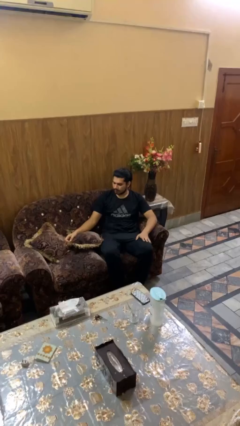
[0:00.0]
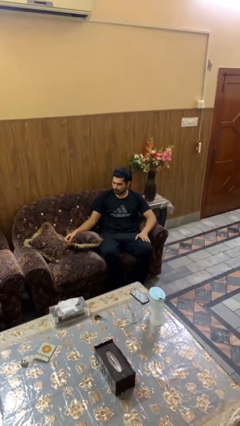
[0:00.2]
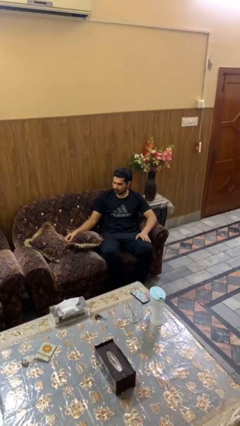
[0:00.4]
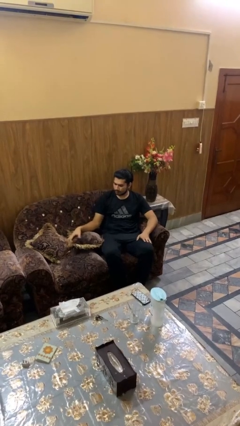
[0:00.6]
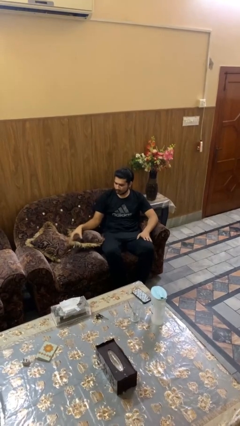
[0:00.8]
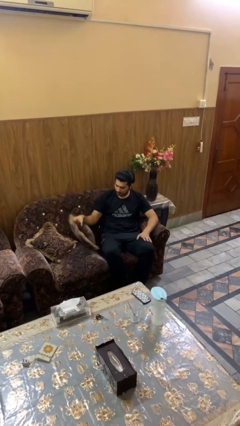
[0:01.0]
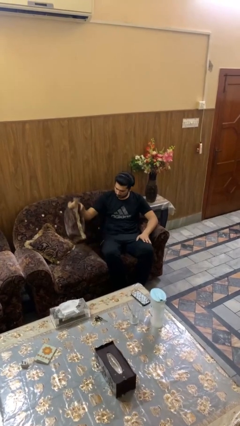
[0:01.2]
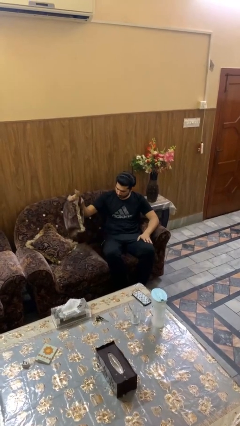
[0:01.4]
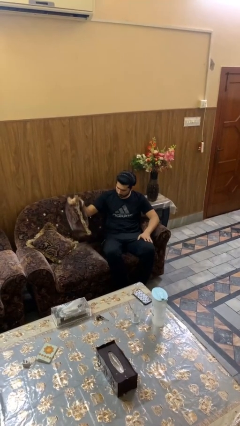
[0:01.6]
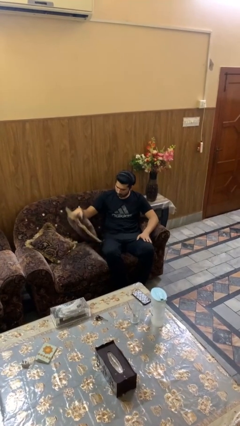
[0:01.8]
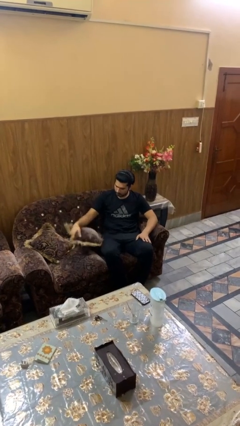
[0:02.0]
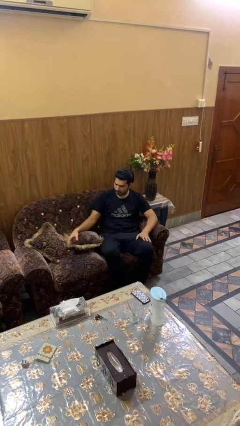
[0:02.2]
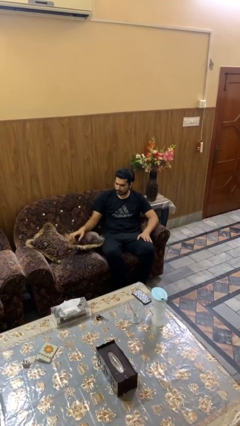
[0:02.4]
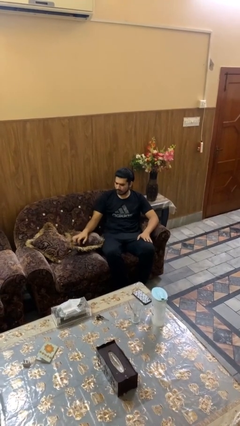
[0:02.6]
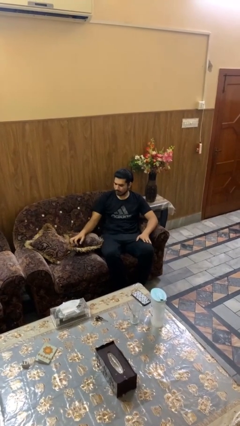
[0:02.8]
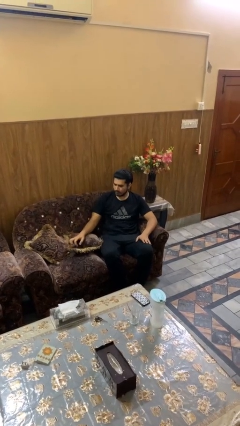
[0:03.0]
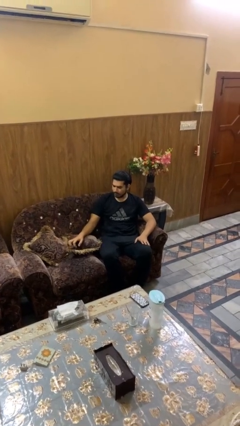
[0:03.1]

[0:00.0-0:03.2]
person searches in couch

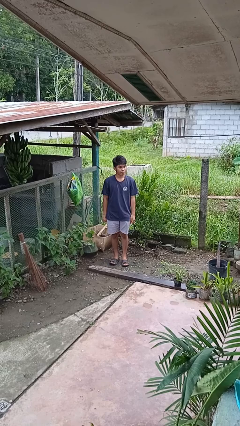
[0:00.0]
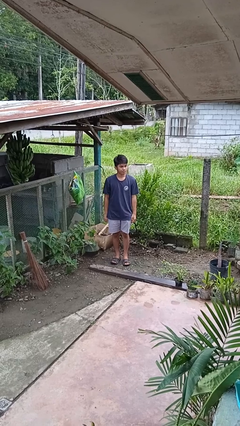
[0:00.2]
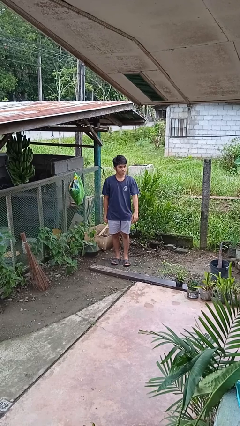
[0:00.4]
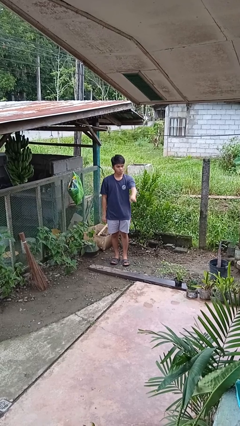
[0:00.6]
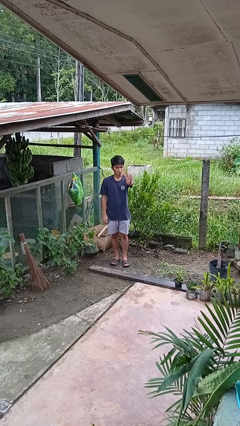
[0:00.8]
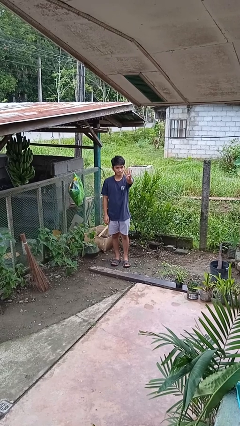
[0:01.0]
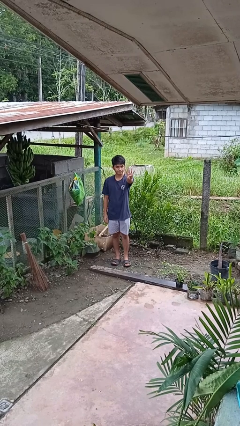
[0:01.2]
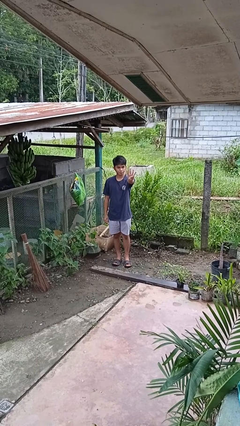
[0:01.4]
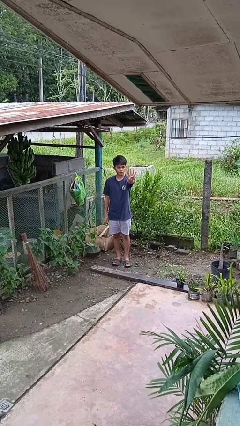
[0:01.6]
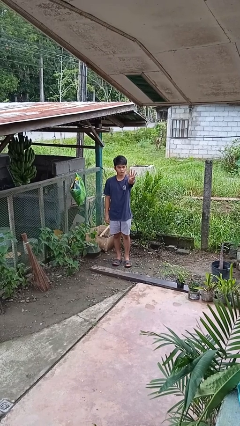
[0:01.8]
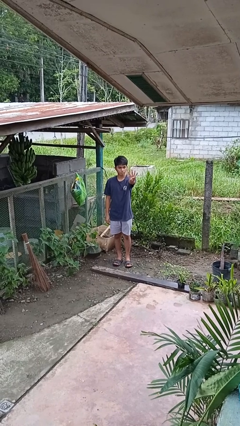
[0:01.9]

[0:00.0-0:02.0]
person gestures number four

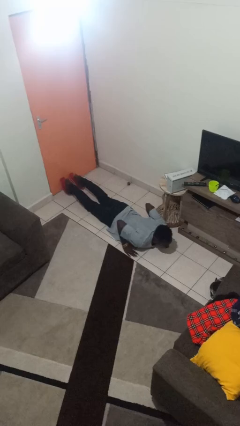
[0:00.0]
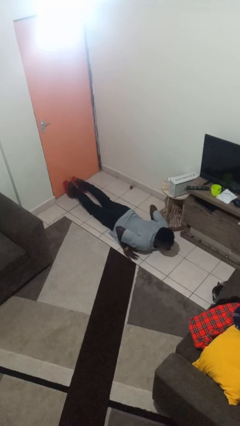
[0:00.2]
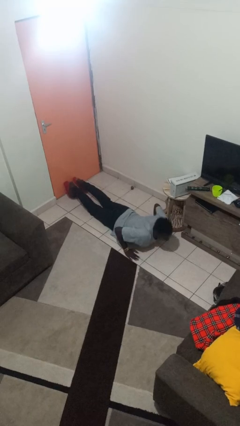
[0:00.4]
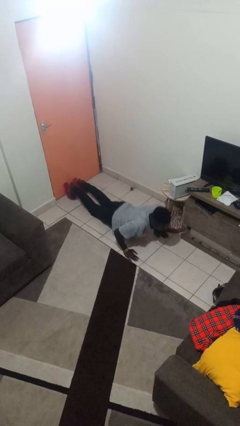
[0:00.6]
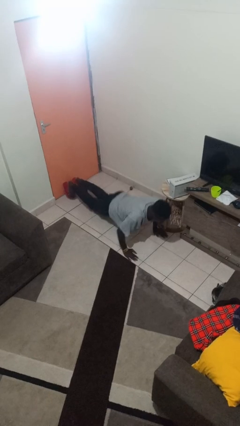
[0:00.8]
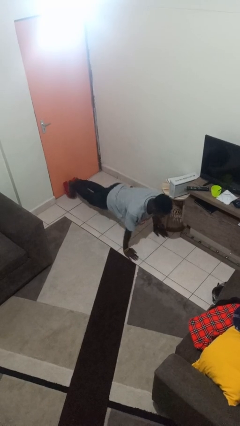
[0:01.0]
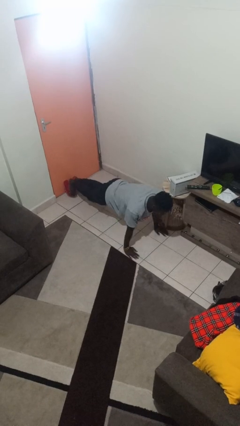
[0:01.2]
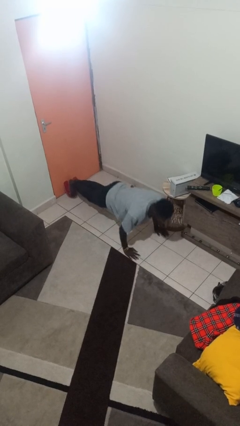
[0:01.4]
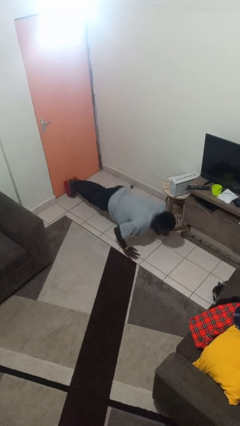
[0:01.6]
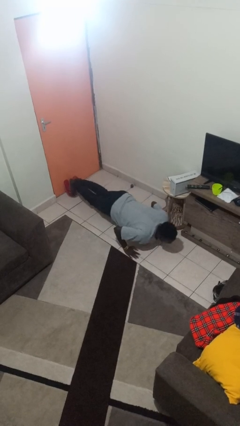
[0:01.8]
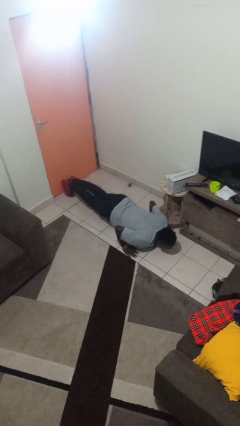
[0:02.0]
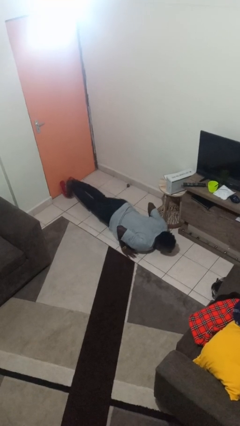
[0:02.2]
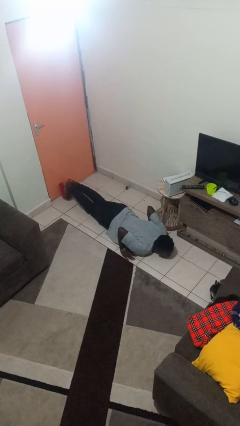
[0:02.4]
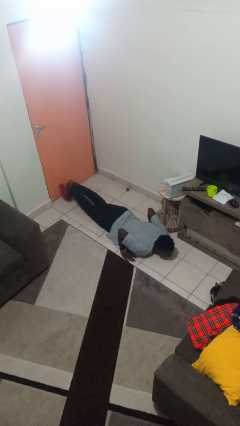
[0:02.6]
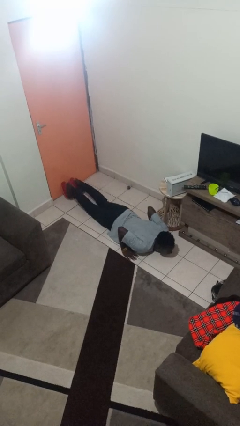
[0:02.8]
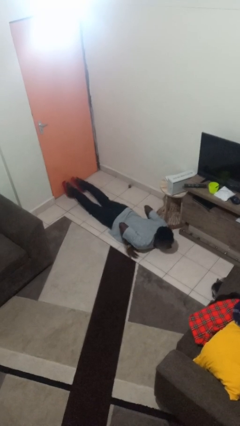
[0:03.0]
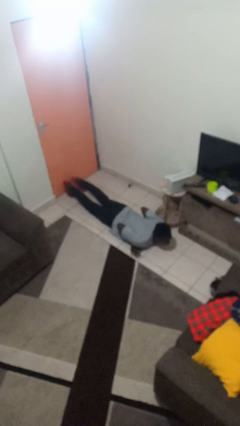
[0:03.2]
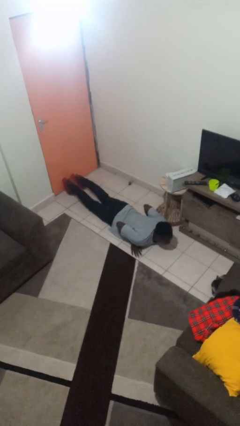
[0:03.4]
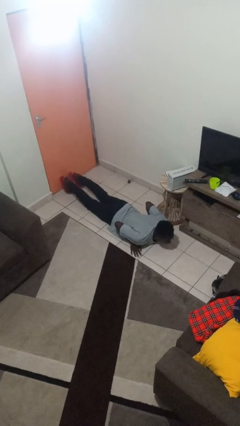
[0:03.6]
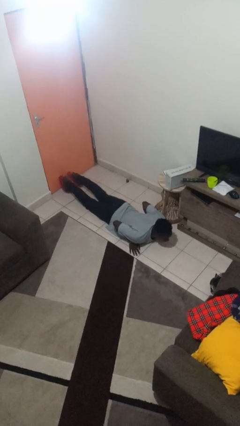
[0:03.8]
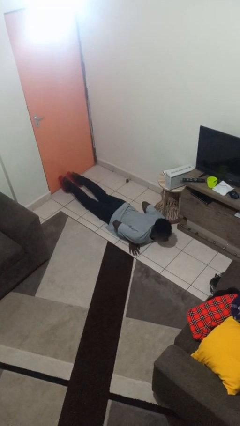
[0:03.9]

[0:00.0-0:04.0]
person exercises with pushup

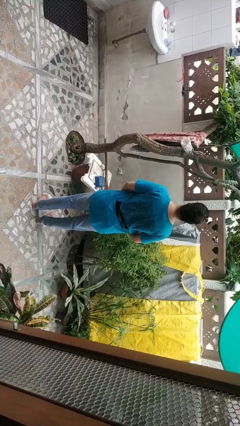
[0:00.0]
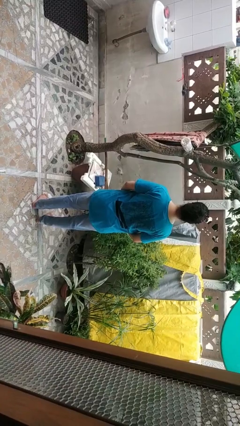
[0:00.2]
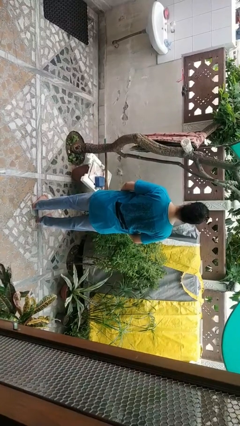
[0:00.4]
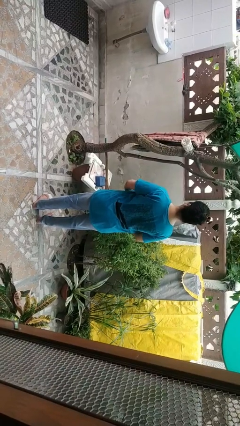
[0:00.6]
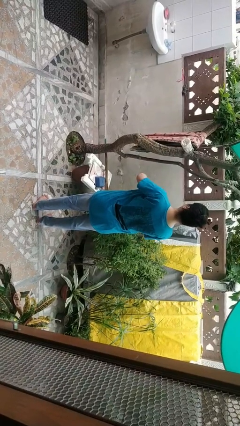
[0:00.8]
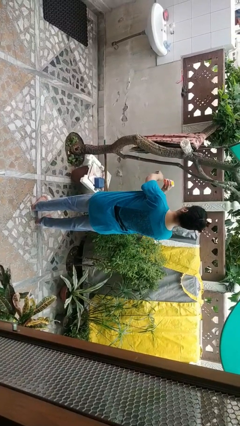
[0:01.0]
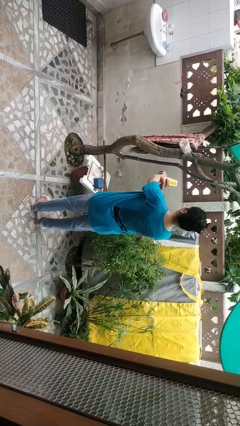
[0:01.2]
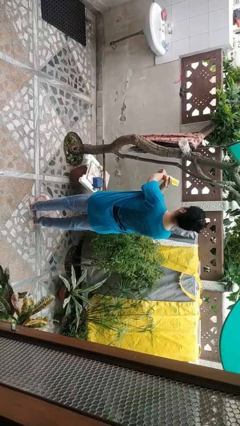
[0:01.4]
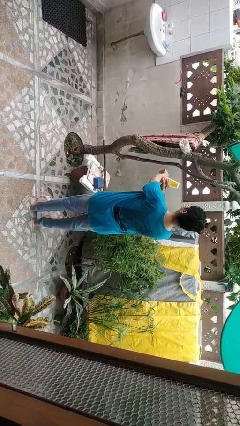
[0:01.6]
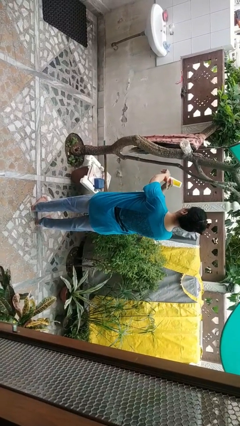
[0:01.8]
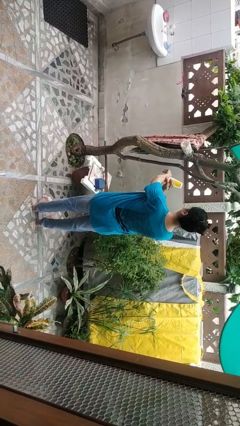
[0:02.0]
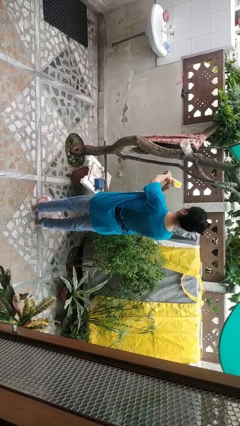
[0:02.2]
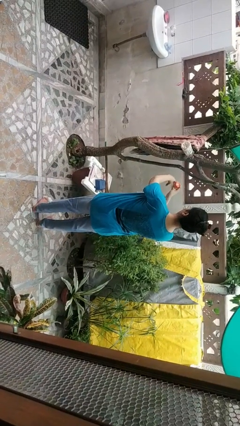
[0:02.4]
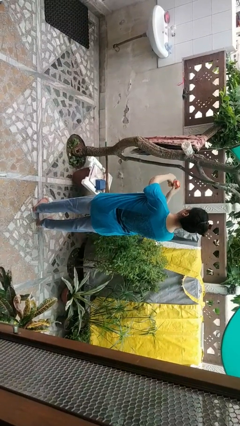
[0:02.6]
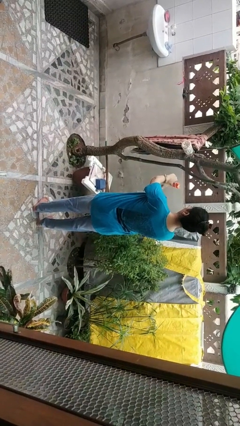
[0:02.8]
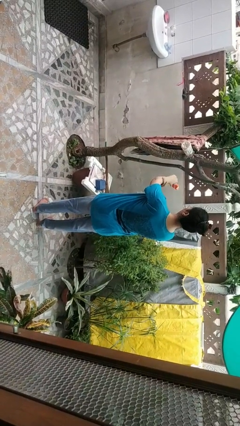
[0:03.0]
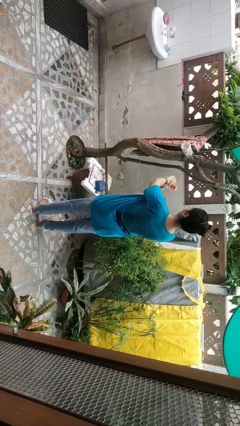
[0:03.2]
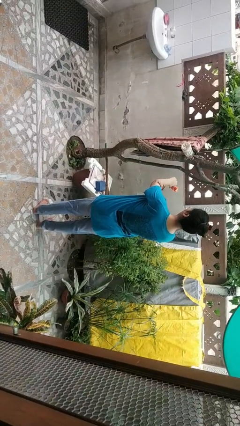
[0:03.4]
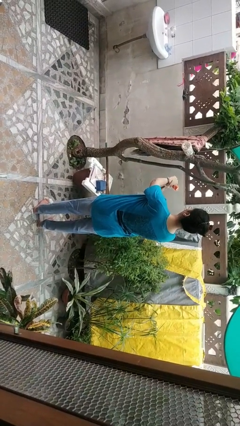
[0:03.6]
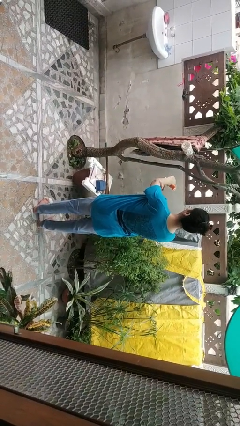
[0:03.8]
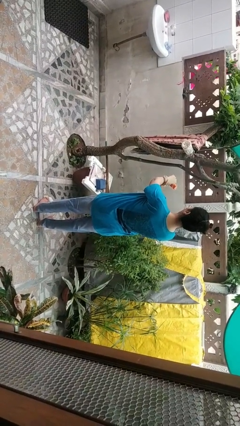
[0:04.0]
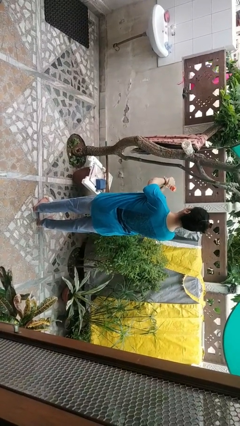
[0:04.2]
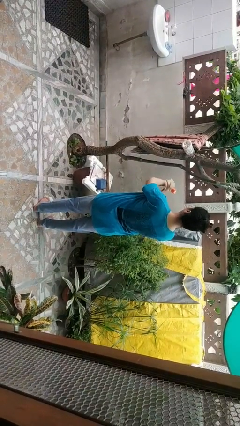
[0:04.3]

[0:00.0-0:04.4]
person applies sunscreen

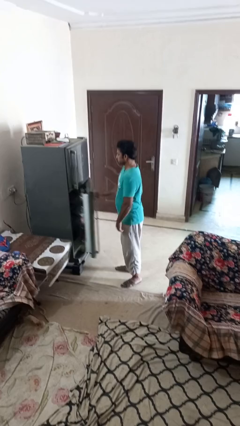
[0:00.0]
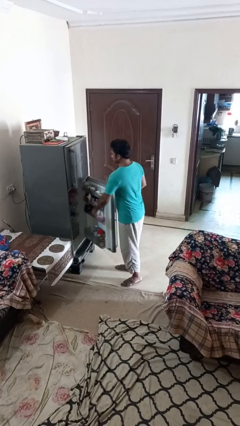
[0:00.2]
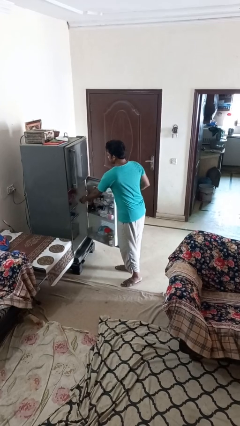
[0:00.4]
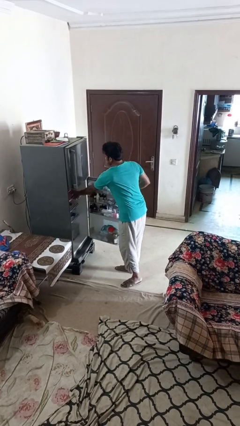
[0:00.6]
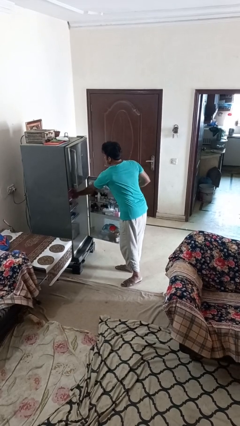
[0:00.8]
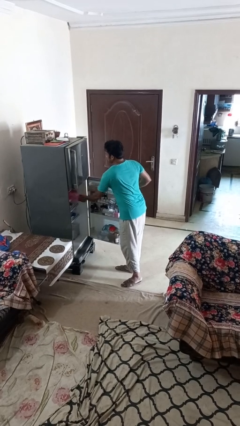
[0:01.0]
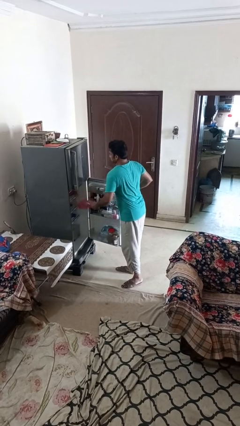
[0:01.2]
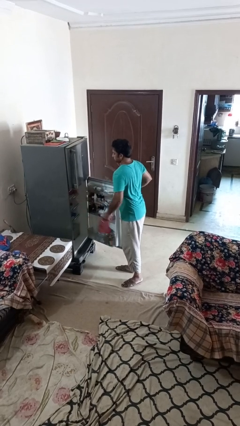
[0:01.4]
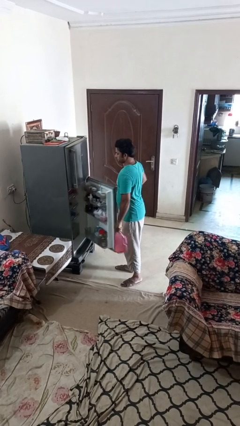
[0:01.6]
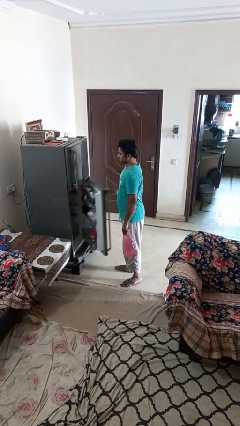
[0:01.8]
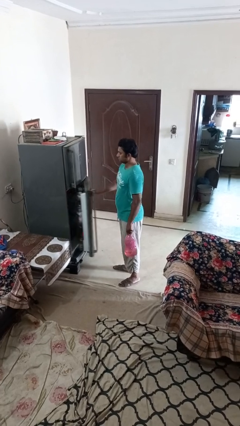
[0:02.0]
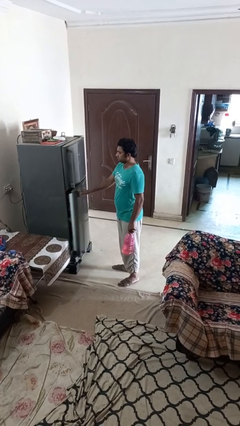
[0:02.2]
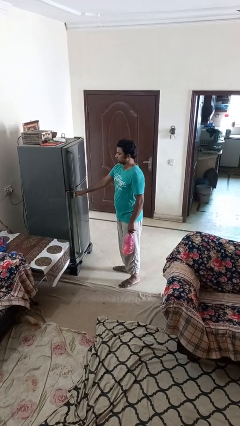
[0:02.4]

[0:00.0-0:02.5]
person takes object from refrigerator

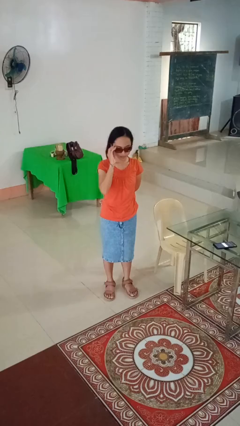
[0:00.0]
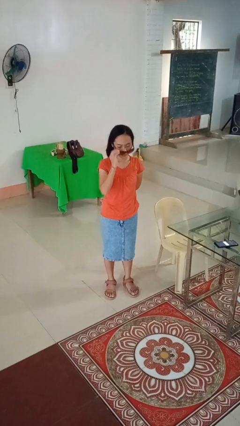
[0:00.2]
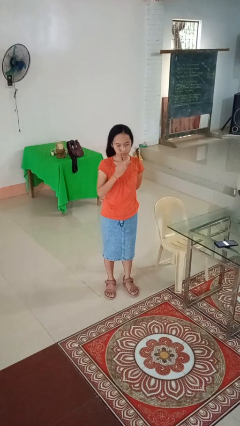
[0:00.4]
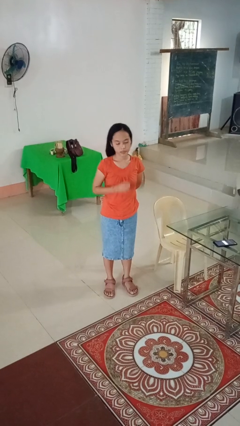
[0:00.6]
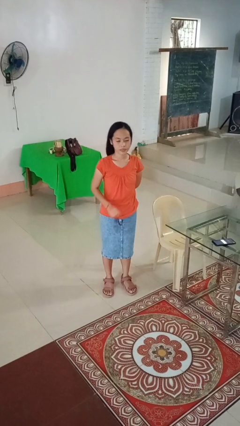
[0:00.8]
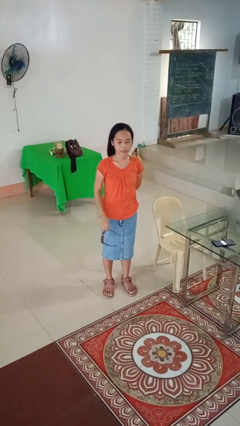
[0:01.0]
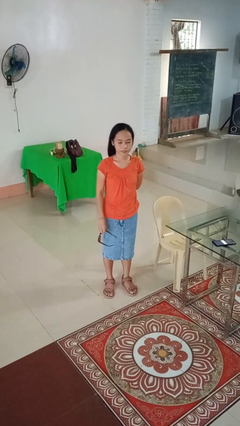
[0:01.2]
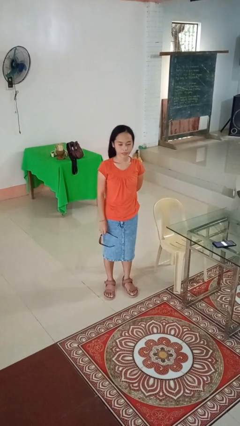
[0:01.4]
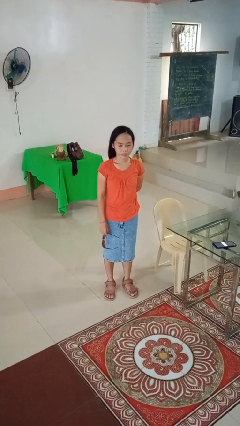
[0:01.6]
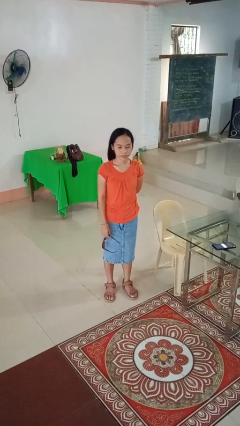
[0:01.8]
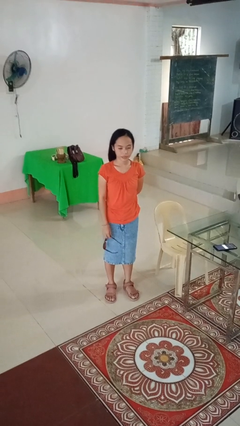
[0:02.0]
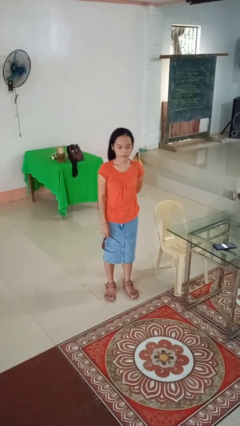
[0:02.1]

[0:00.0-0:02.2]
person takes off sunglasses
